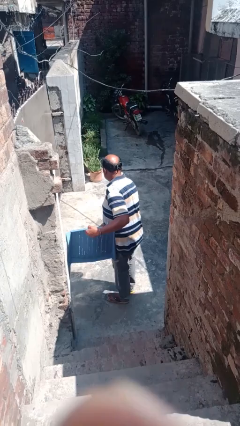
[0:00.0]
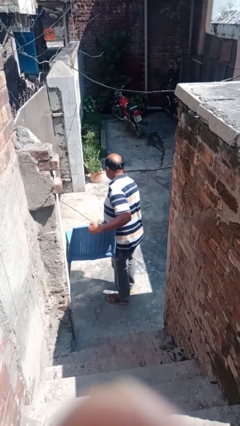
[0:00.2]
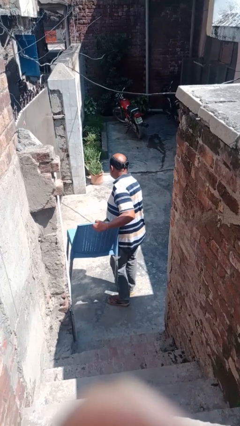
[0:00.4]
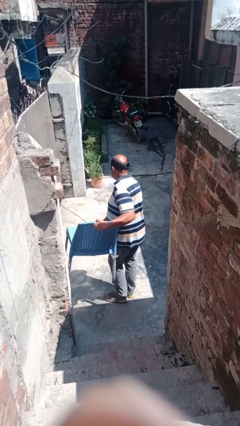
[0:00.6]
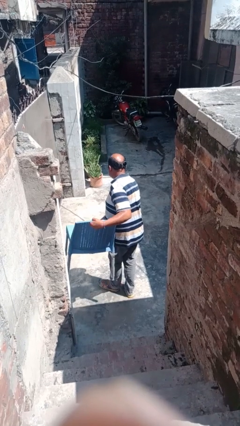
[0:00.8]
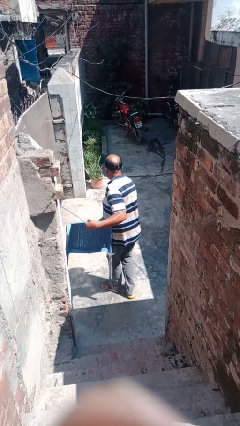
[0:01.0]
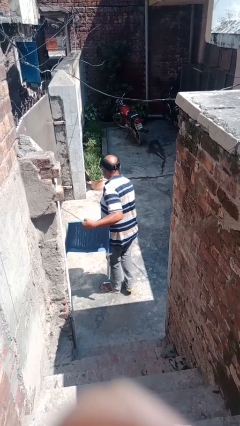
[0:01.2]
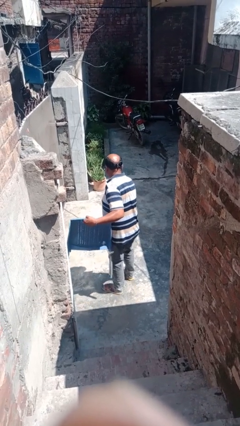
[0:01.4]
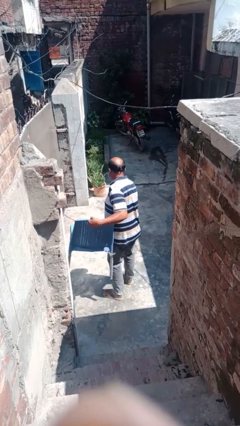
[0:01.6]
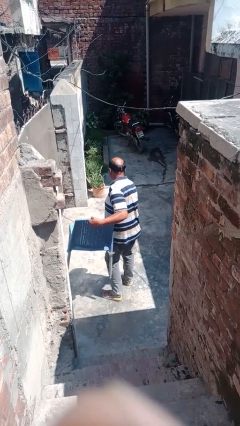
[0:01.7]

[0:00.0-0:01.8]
person carries furniture

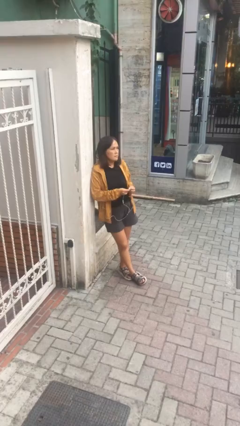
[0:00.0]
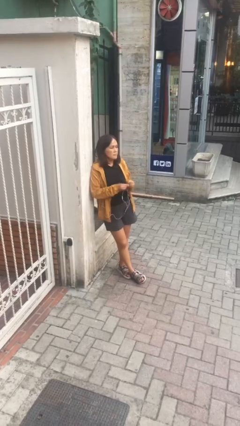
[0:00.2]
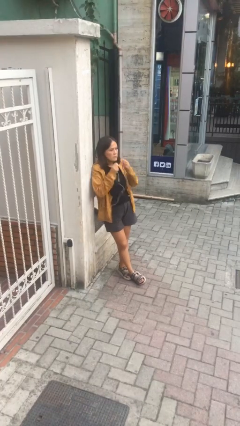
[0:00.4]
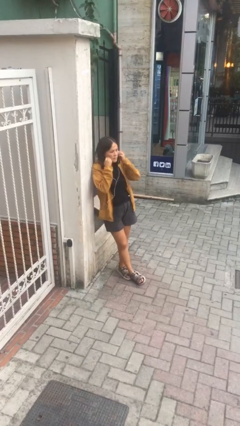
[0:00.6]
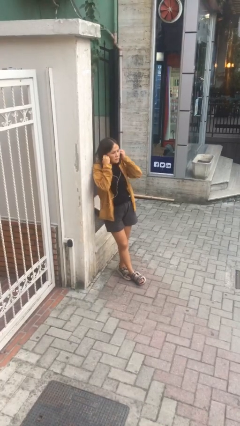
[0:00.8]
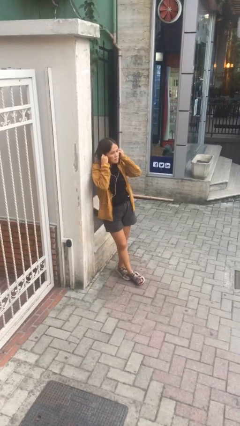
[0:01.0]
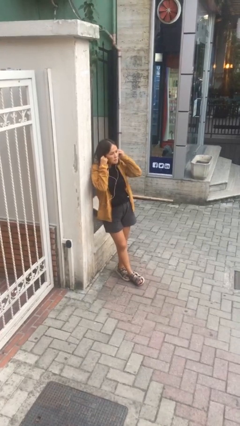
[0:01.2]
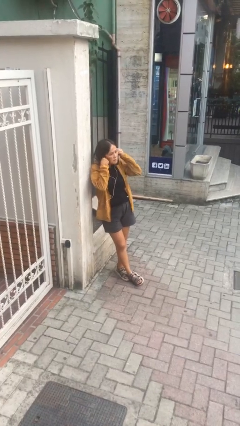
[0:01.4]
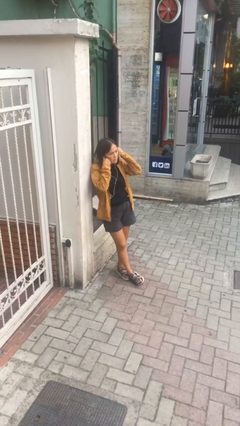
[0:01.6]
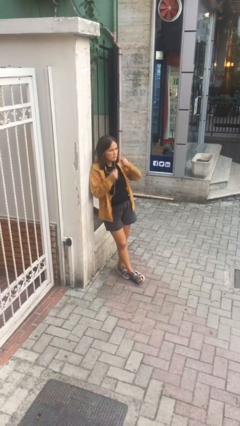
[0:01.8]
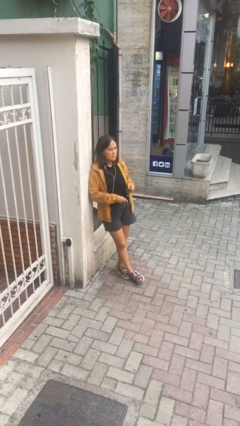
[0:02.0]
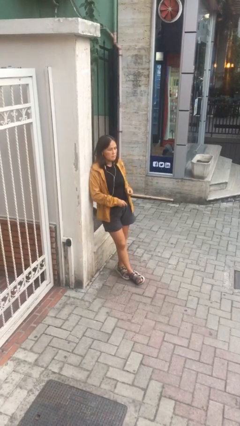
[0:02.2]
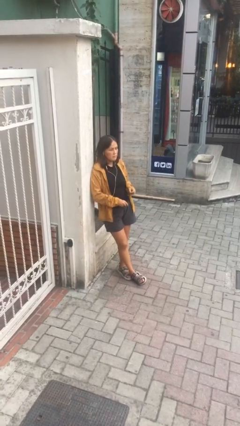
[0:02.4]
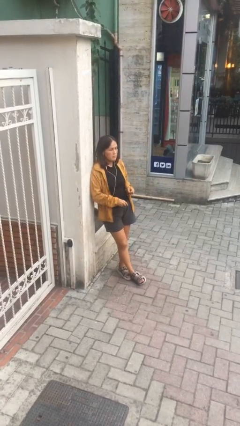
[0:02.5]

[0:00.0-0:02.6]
person puts on headphones

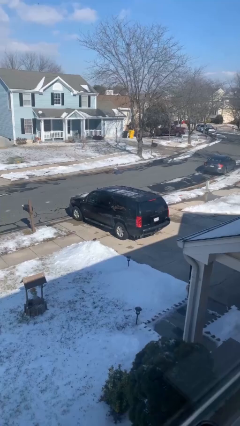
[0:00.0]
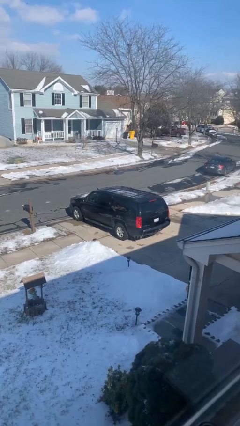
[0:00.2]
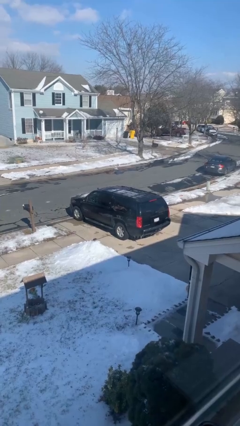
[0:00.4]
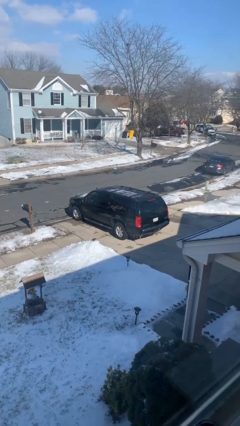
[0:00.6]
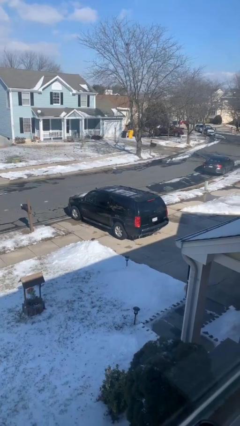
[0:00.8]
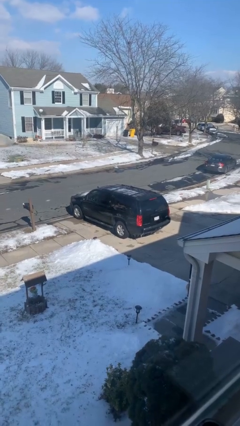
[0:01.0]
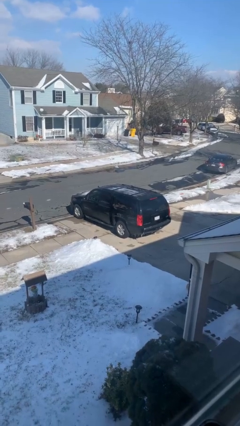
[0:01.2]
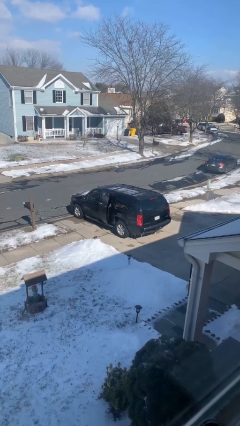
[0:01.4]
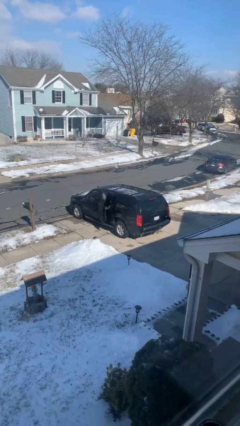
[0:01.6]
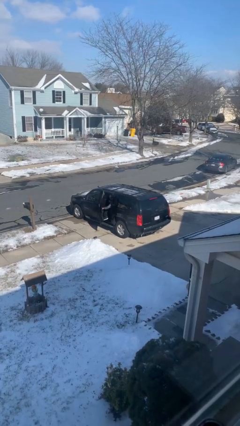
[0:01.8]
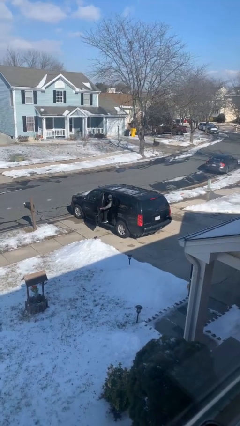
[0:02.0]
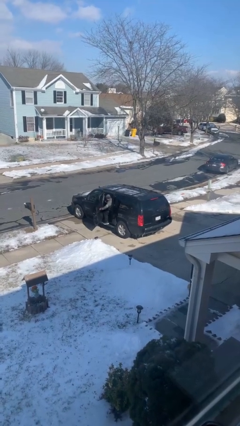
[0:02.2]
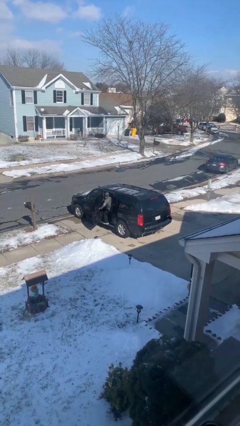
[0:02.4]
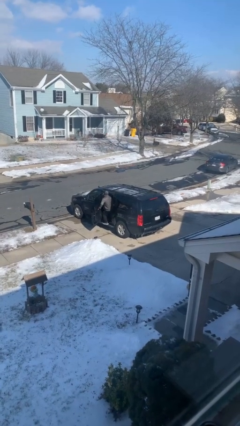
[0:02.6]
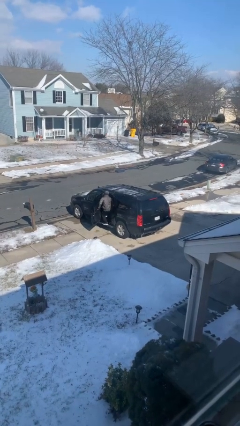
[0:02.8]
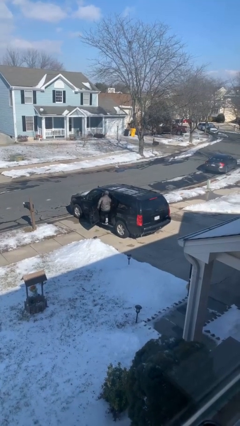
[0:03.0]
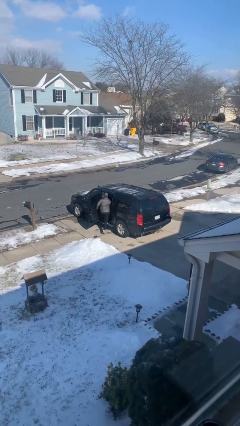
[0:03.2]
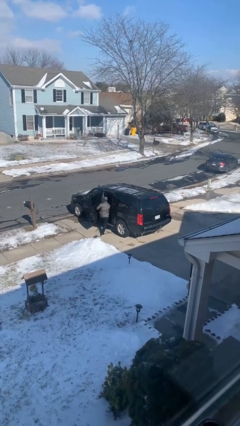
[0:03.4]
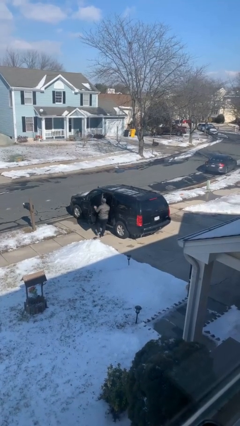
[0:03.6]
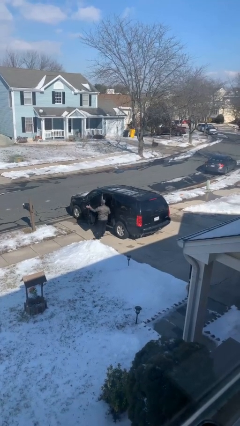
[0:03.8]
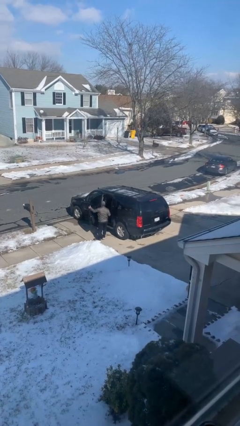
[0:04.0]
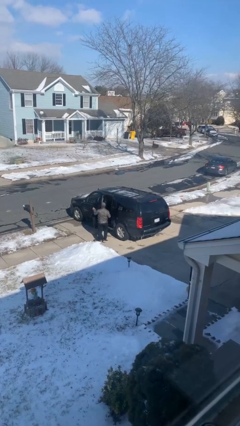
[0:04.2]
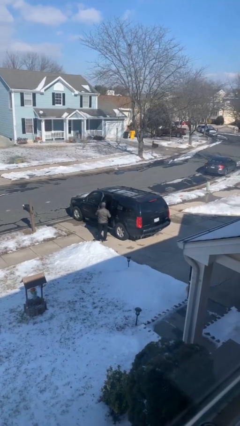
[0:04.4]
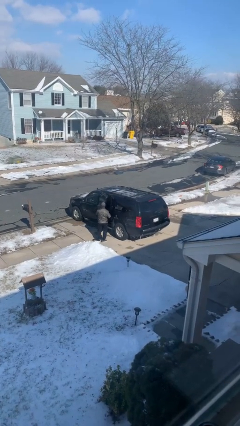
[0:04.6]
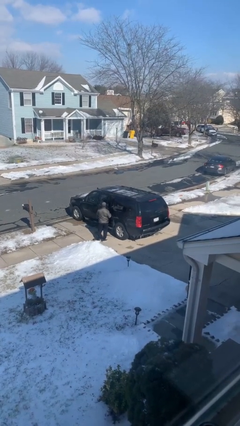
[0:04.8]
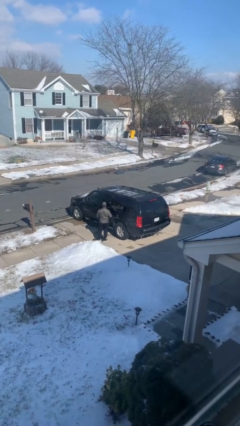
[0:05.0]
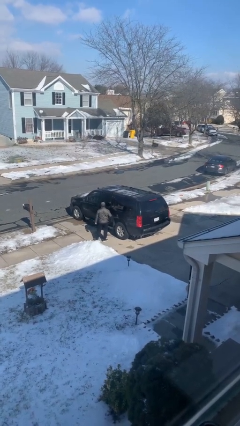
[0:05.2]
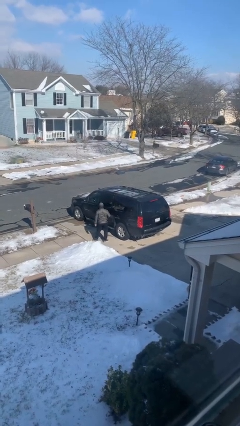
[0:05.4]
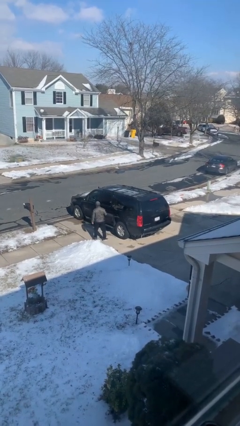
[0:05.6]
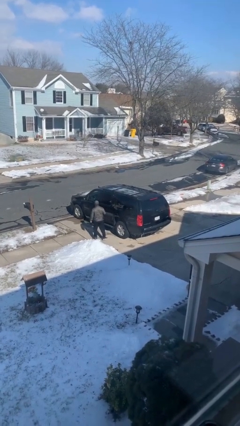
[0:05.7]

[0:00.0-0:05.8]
car drops off person

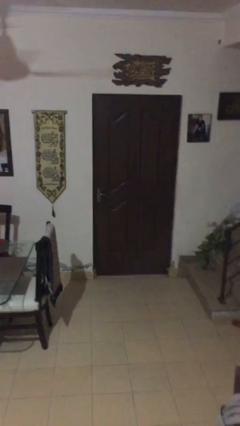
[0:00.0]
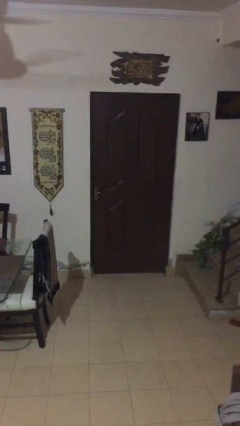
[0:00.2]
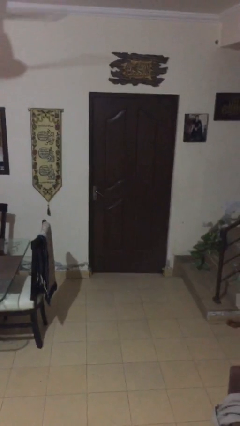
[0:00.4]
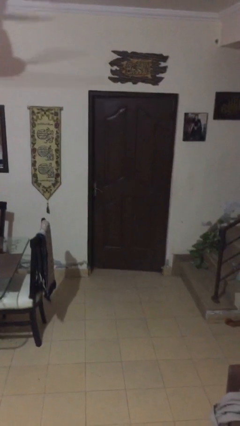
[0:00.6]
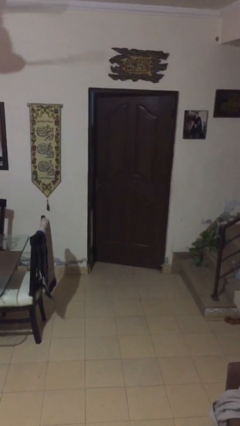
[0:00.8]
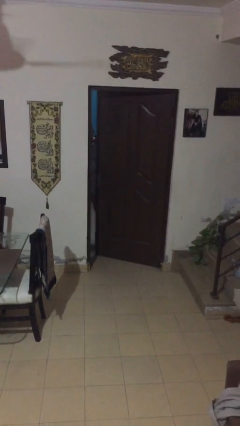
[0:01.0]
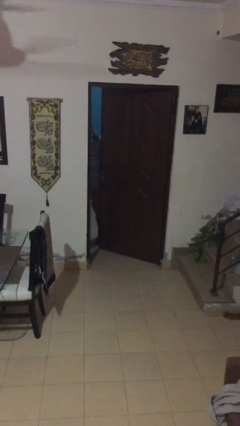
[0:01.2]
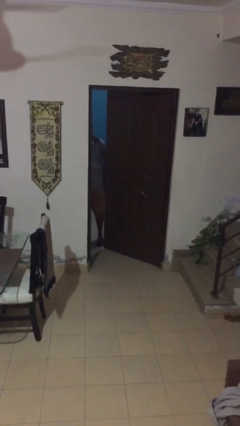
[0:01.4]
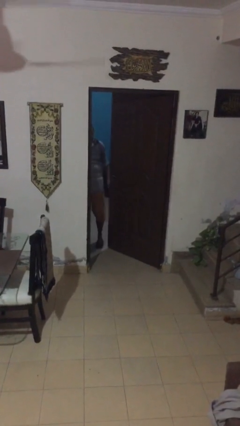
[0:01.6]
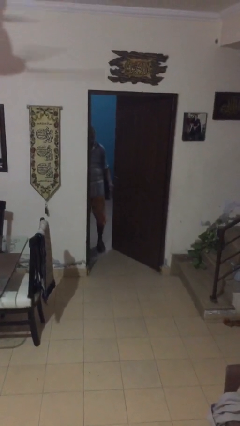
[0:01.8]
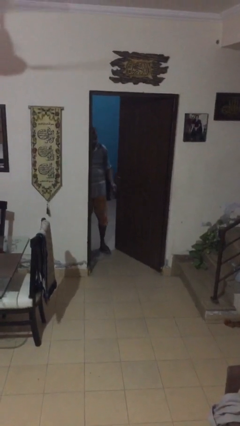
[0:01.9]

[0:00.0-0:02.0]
person opens facility door

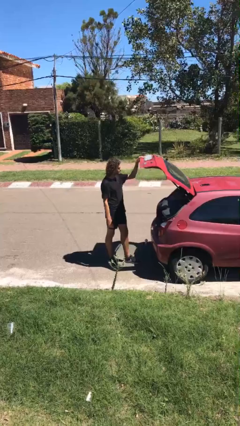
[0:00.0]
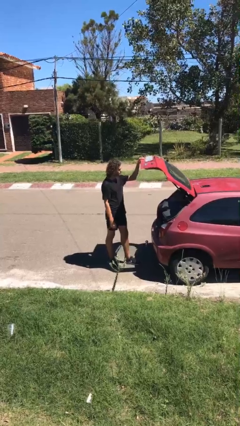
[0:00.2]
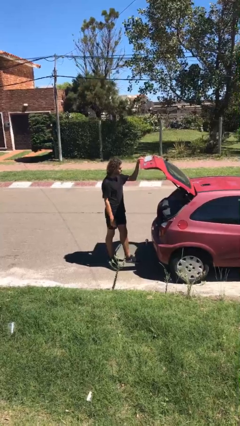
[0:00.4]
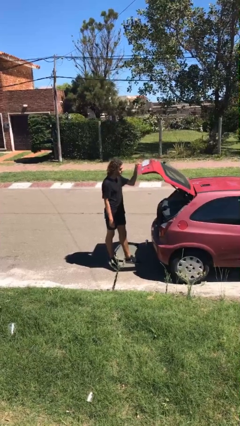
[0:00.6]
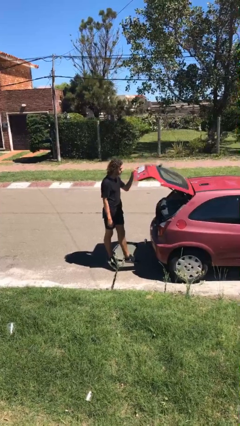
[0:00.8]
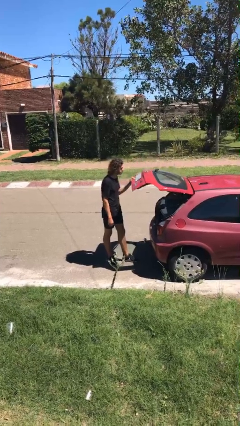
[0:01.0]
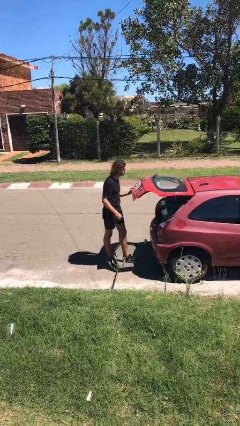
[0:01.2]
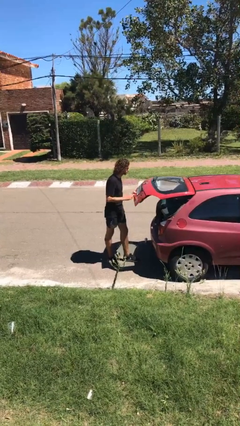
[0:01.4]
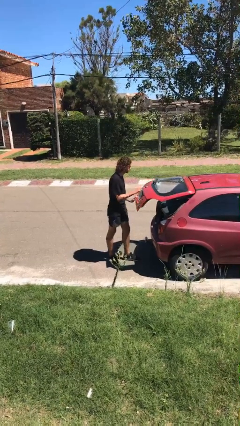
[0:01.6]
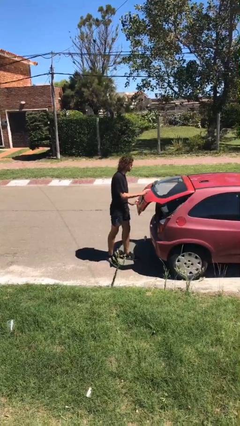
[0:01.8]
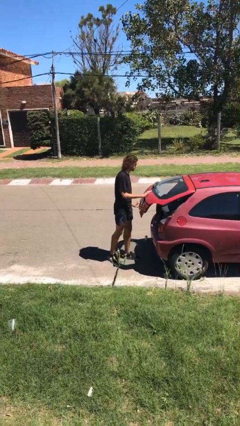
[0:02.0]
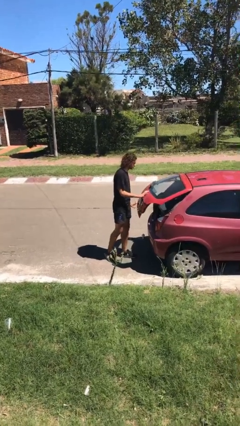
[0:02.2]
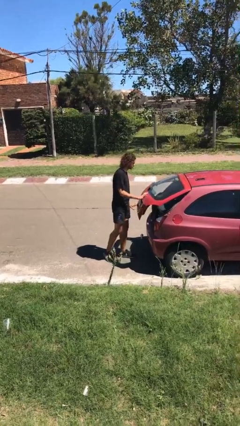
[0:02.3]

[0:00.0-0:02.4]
person closes car trunk

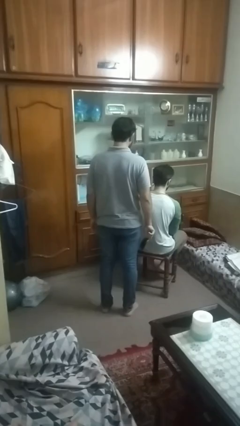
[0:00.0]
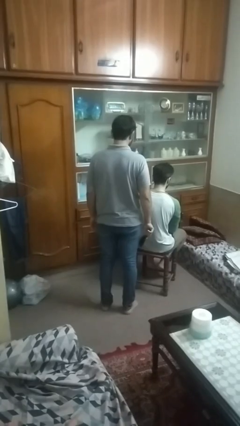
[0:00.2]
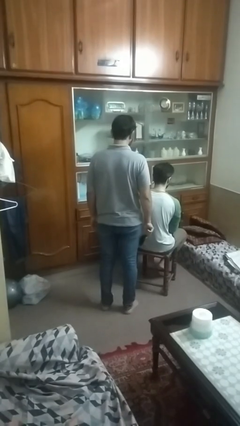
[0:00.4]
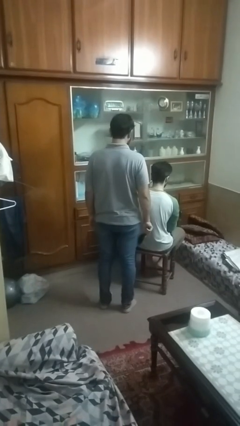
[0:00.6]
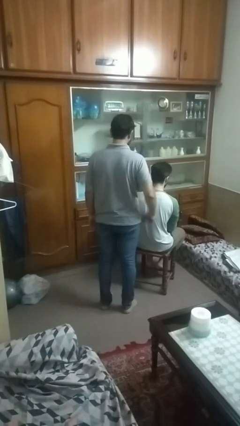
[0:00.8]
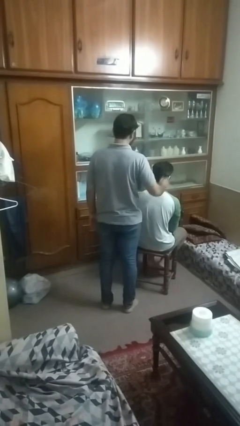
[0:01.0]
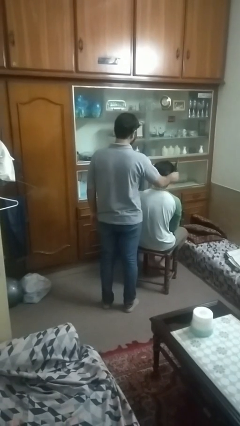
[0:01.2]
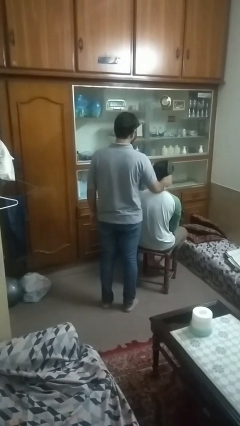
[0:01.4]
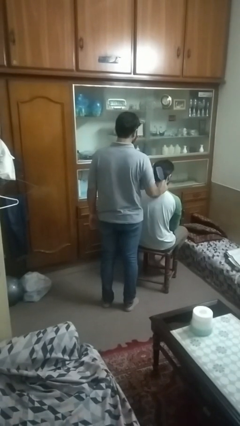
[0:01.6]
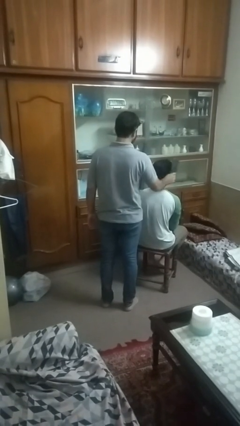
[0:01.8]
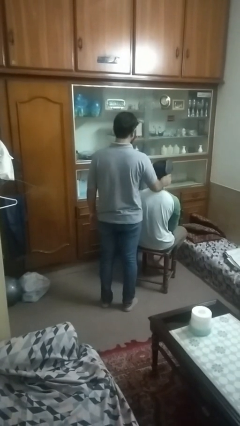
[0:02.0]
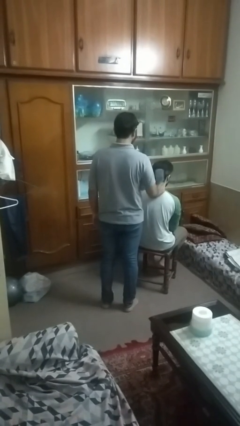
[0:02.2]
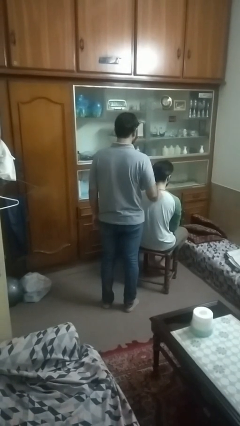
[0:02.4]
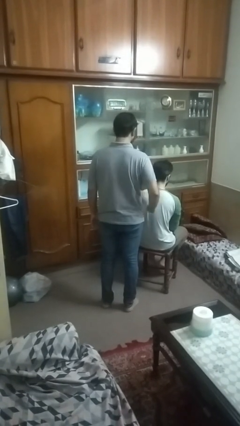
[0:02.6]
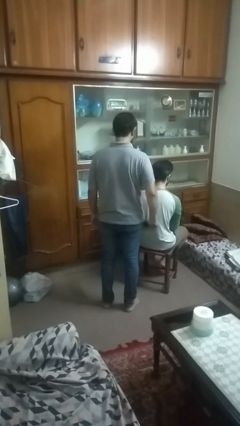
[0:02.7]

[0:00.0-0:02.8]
person brushes hair of person
